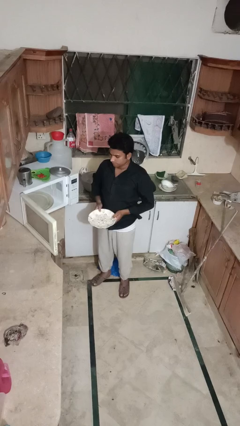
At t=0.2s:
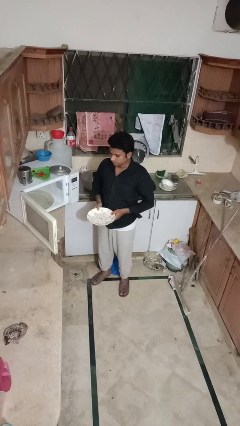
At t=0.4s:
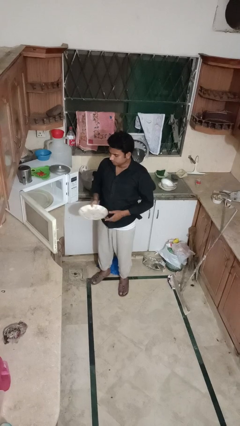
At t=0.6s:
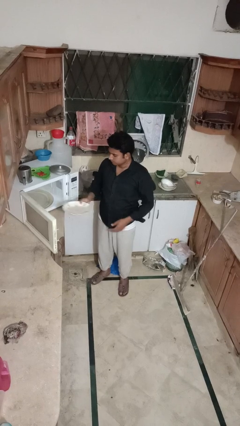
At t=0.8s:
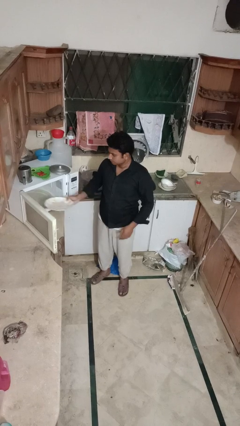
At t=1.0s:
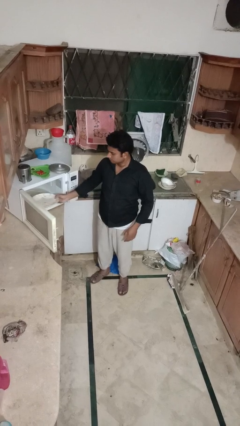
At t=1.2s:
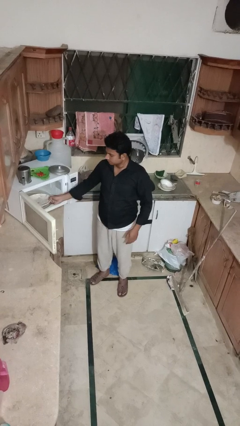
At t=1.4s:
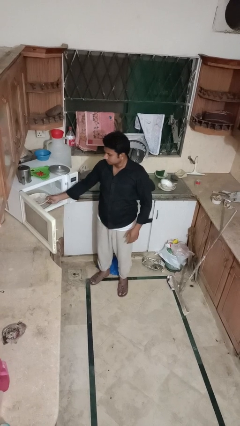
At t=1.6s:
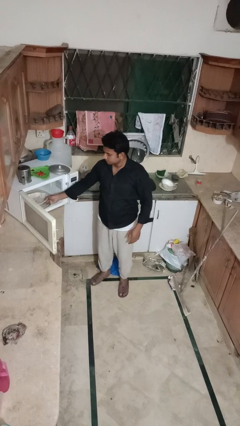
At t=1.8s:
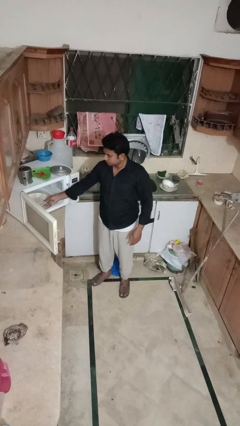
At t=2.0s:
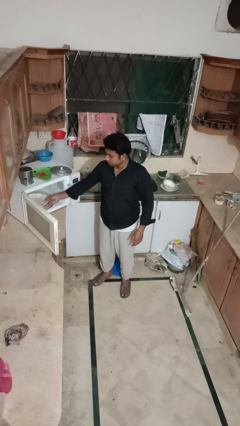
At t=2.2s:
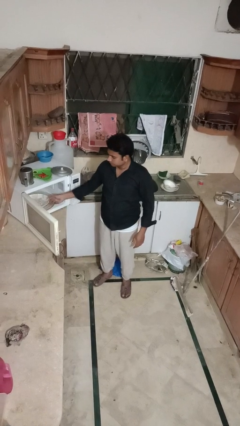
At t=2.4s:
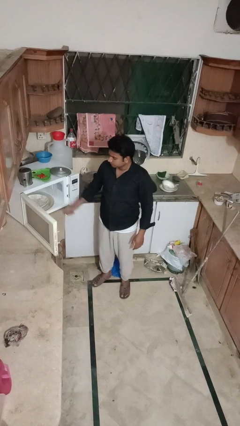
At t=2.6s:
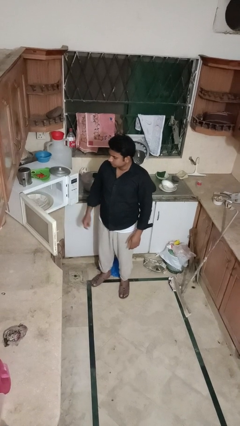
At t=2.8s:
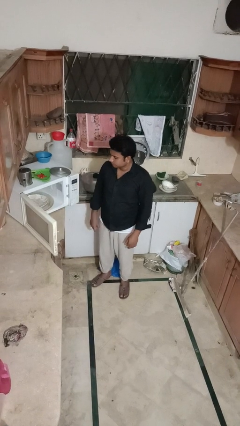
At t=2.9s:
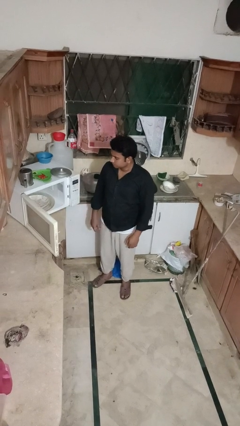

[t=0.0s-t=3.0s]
person puts object into microwave

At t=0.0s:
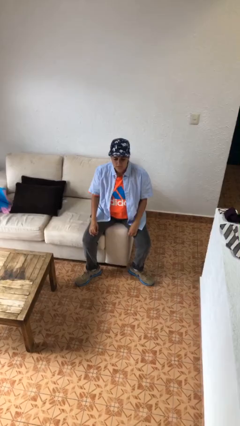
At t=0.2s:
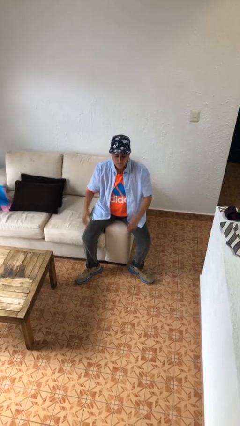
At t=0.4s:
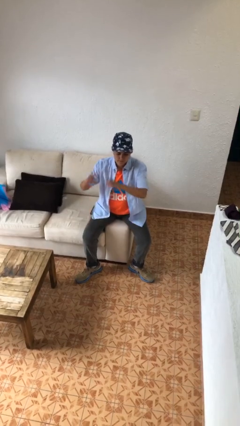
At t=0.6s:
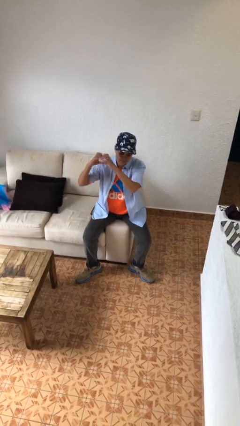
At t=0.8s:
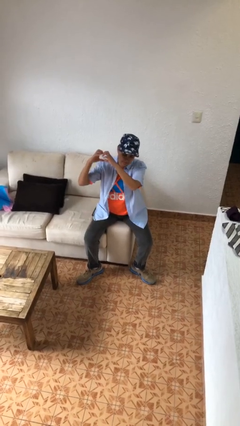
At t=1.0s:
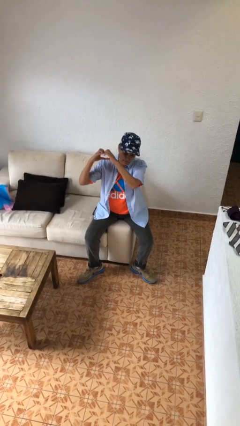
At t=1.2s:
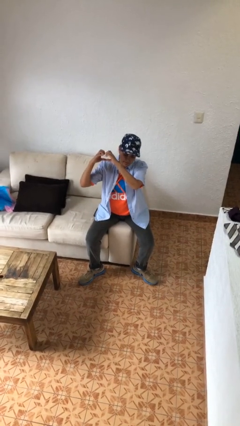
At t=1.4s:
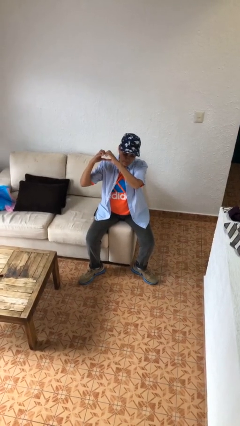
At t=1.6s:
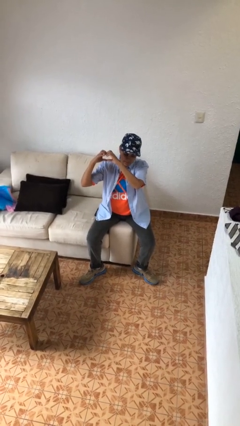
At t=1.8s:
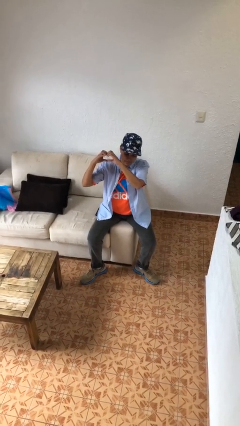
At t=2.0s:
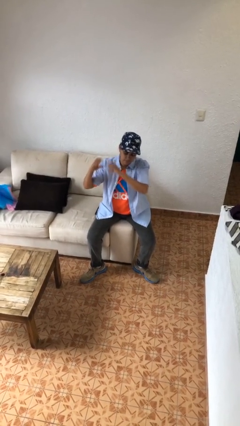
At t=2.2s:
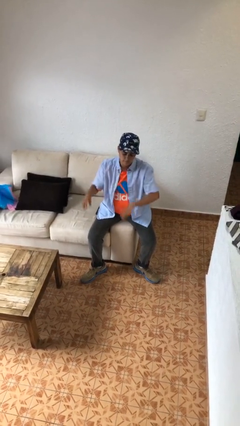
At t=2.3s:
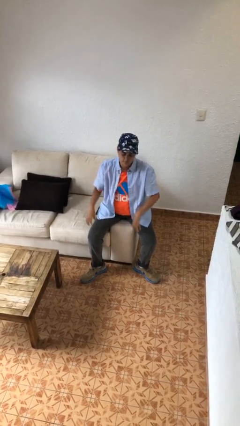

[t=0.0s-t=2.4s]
person gestures heart

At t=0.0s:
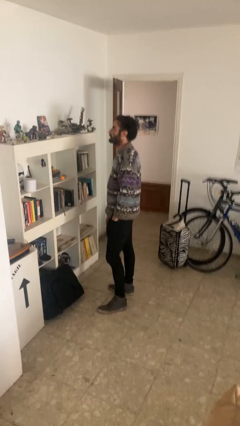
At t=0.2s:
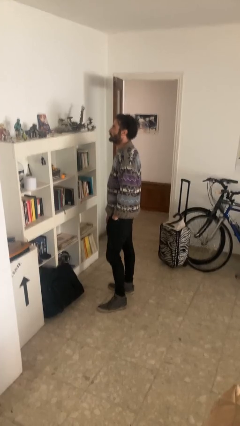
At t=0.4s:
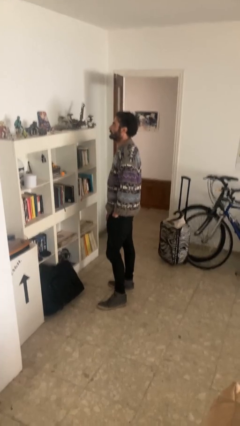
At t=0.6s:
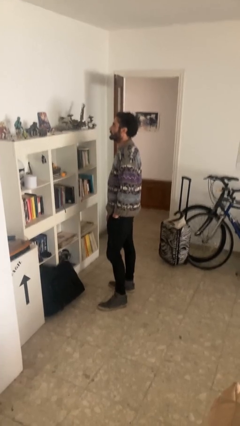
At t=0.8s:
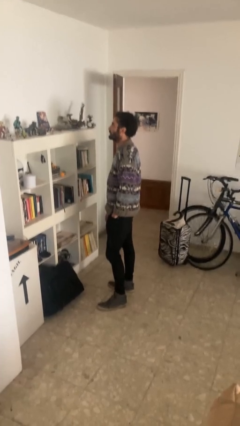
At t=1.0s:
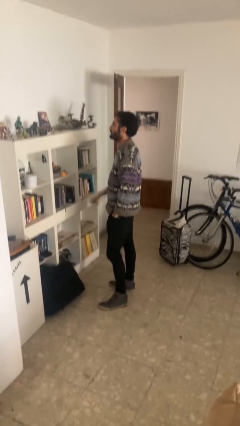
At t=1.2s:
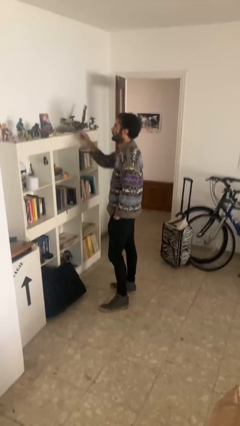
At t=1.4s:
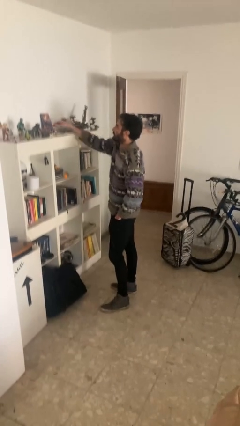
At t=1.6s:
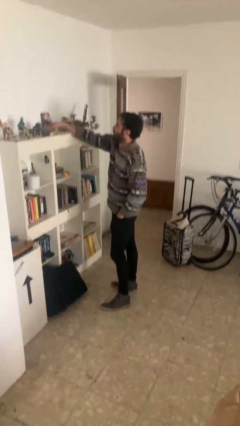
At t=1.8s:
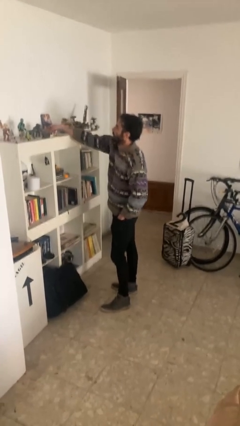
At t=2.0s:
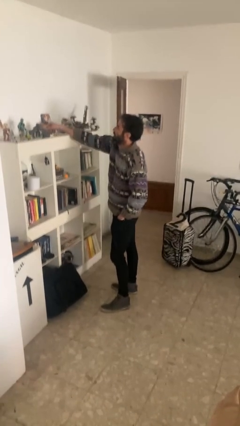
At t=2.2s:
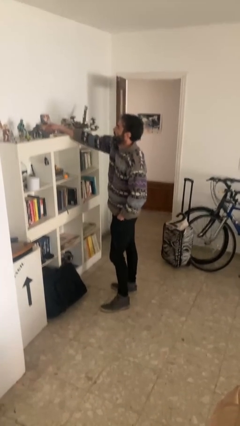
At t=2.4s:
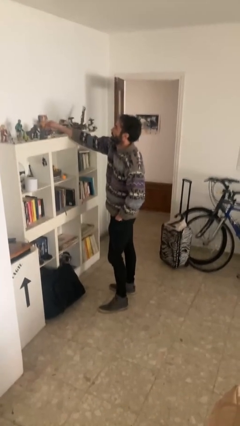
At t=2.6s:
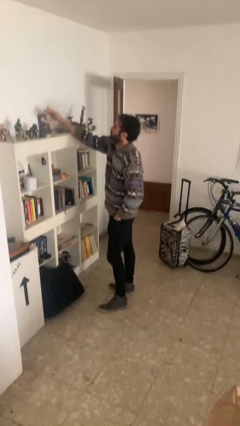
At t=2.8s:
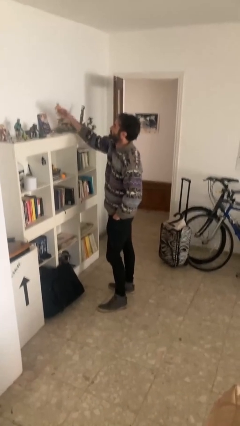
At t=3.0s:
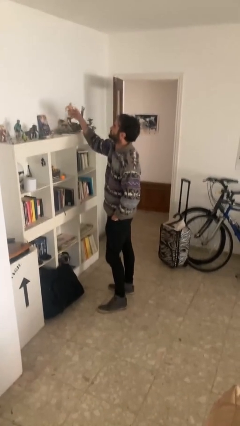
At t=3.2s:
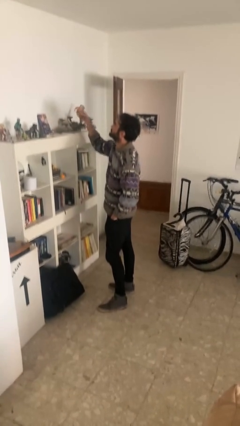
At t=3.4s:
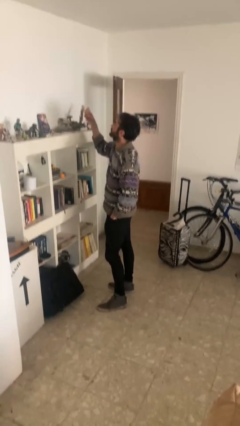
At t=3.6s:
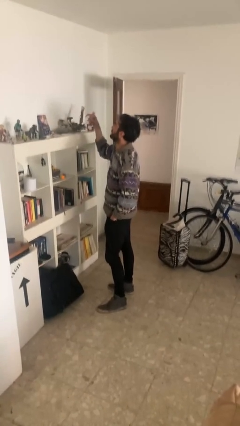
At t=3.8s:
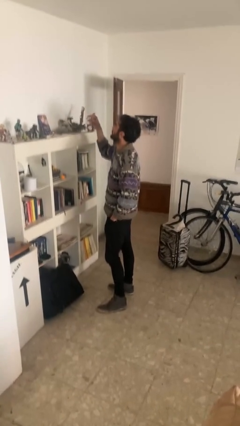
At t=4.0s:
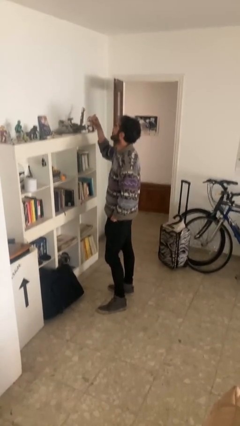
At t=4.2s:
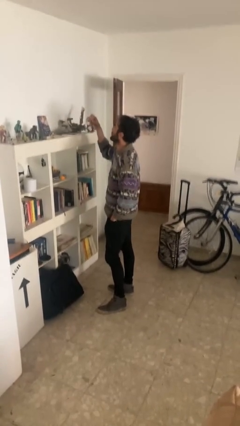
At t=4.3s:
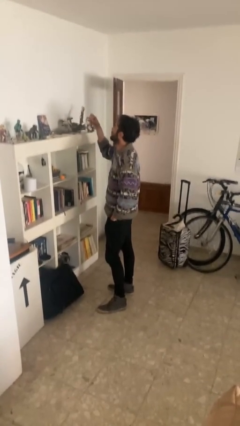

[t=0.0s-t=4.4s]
person picks up object from shelf

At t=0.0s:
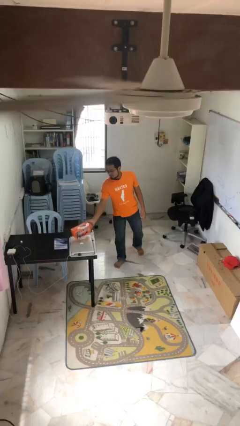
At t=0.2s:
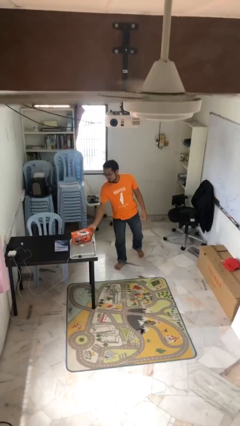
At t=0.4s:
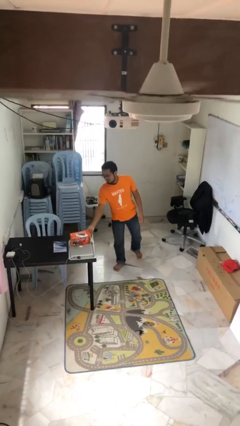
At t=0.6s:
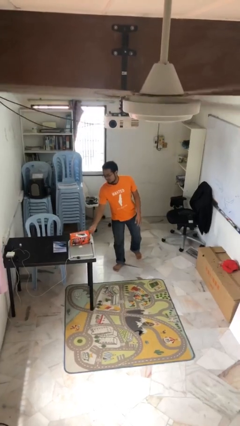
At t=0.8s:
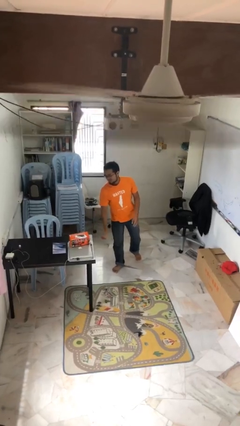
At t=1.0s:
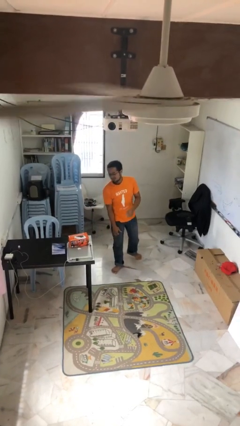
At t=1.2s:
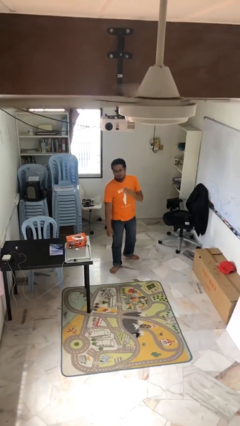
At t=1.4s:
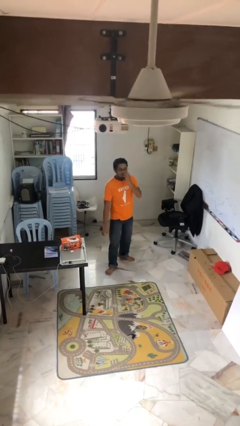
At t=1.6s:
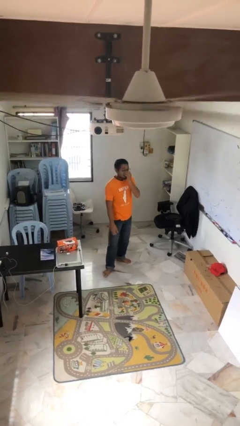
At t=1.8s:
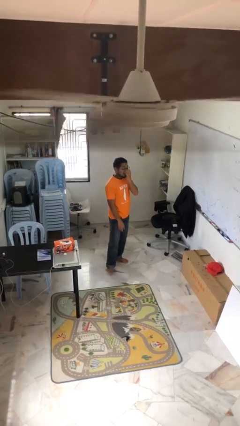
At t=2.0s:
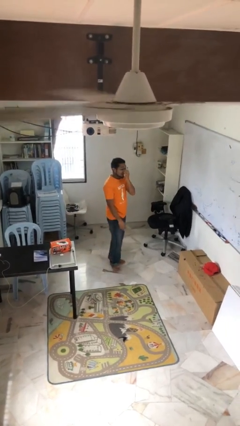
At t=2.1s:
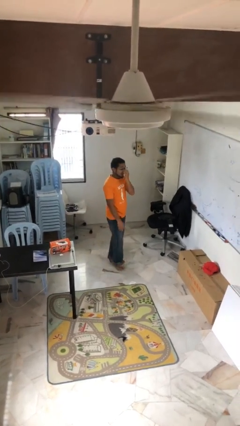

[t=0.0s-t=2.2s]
person puts down object on table

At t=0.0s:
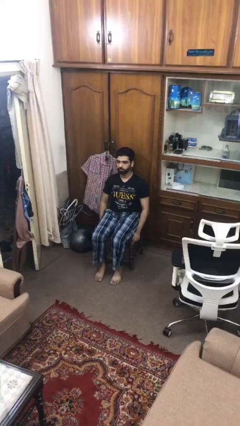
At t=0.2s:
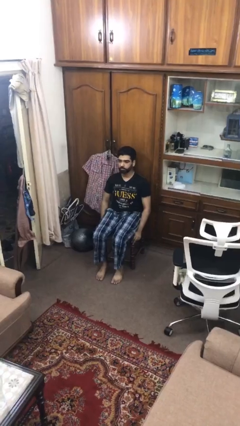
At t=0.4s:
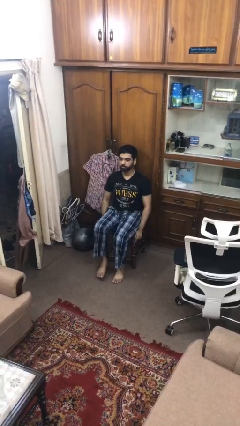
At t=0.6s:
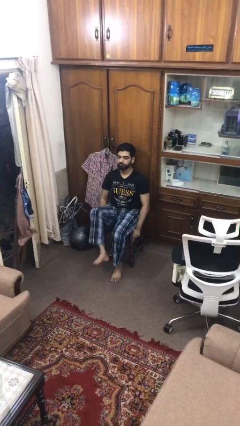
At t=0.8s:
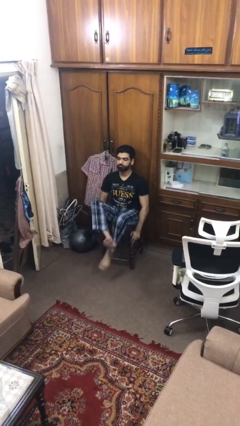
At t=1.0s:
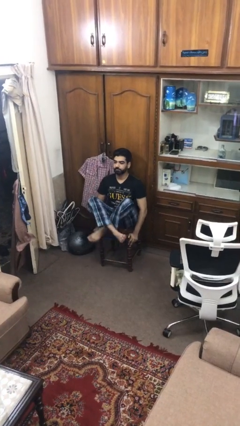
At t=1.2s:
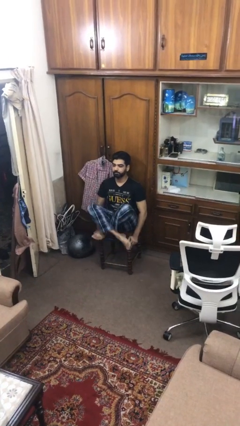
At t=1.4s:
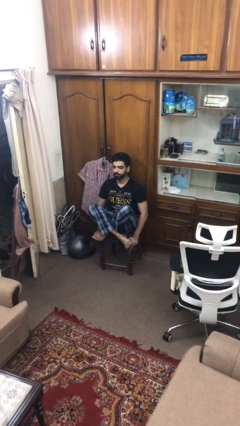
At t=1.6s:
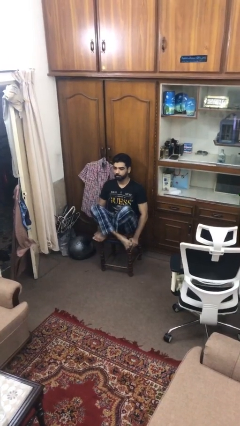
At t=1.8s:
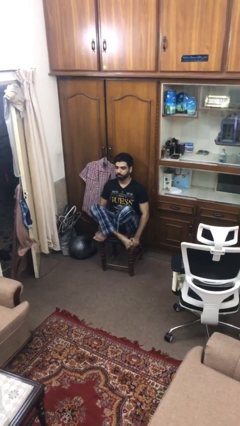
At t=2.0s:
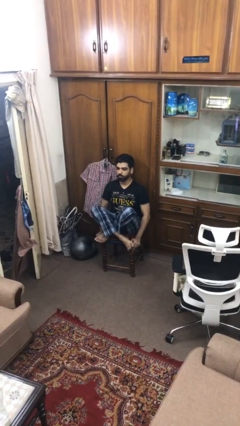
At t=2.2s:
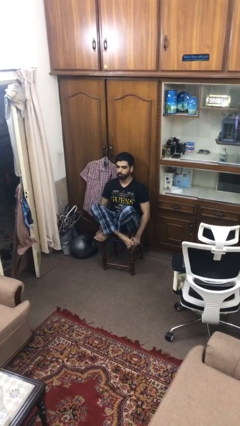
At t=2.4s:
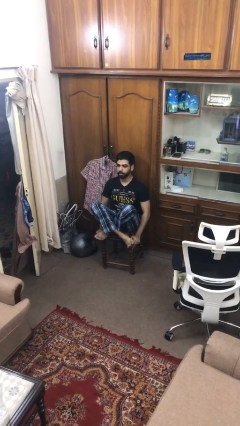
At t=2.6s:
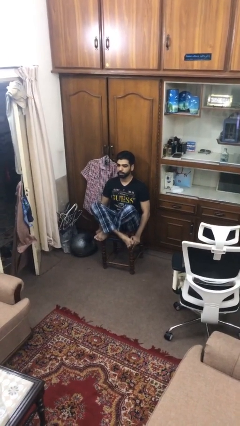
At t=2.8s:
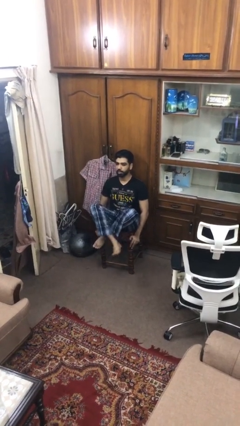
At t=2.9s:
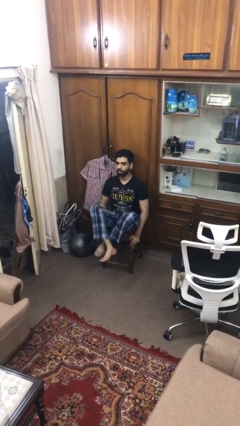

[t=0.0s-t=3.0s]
person crosses legs

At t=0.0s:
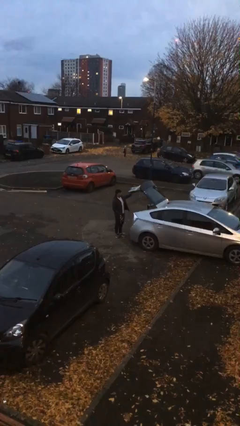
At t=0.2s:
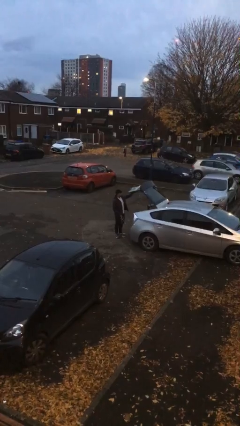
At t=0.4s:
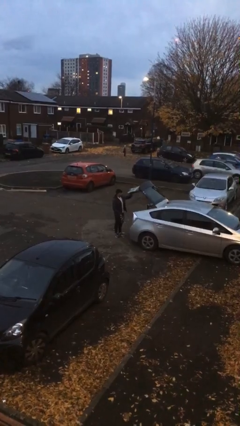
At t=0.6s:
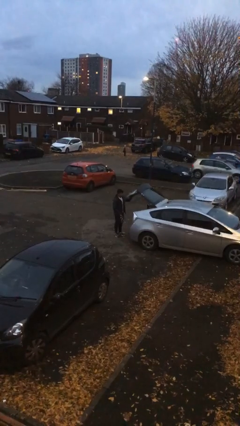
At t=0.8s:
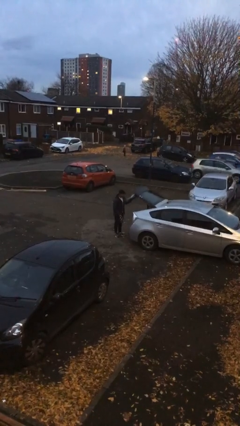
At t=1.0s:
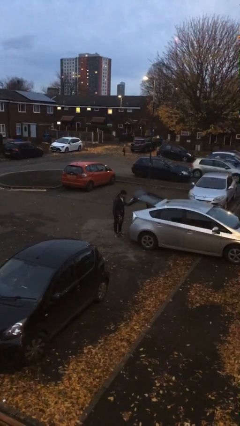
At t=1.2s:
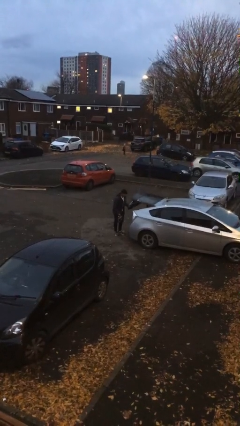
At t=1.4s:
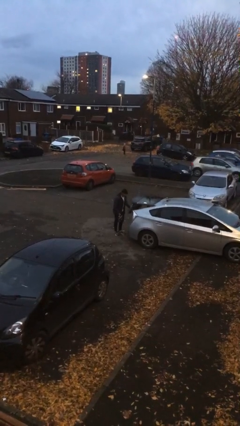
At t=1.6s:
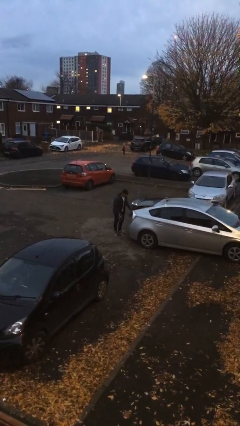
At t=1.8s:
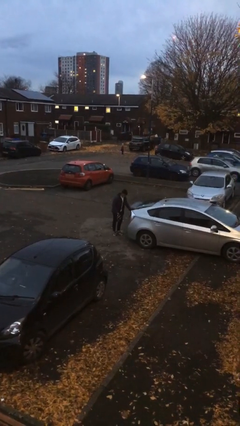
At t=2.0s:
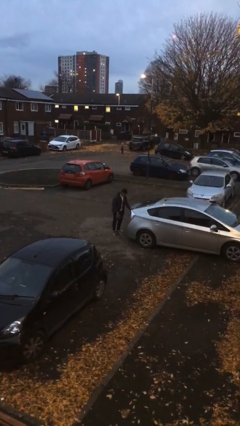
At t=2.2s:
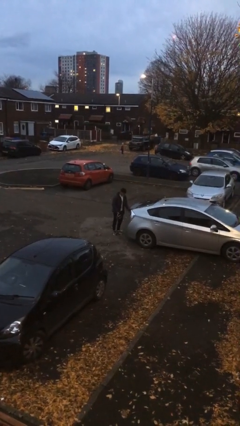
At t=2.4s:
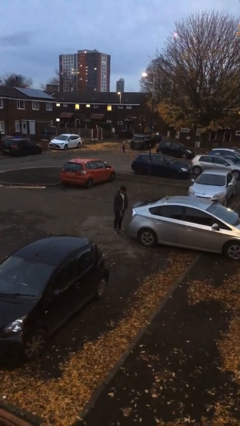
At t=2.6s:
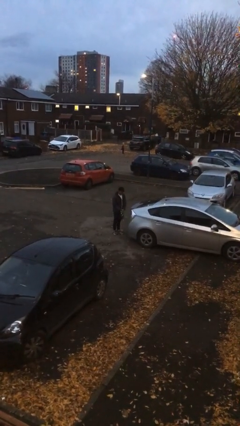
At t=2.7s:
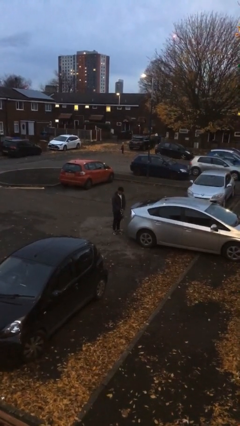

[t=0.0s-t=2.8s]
person closes car trunk
